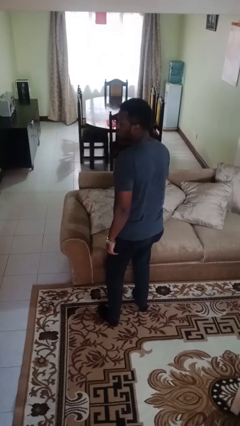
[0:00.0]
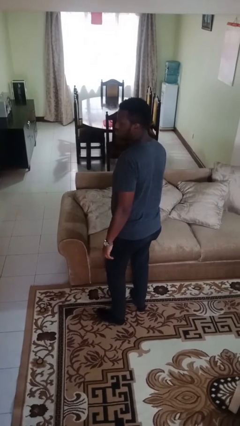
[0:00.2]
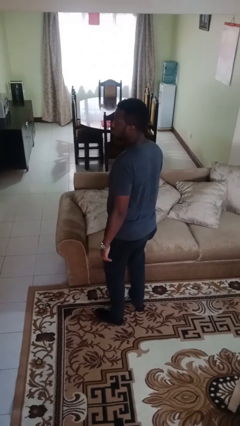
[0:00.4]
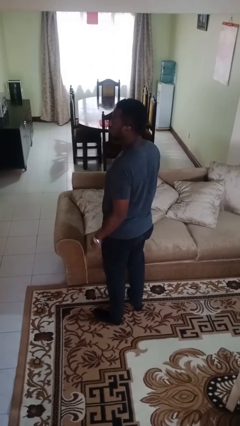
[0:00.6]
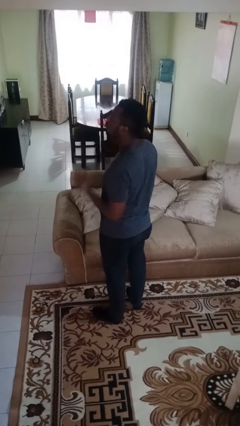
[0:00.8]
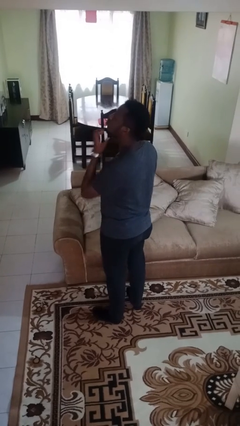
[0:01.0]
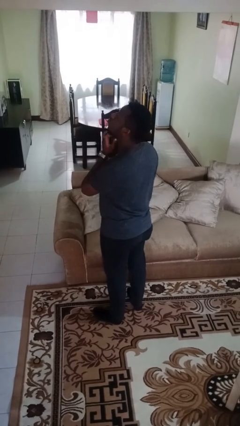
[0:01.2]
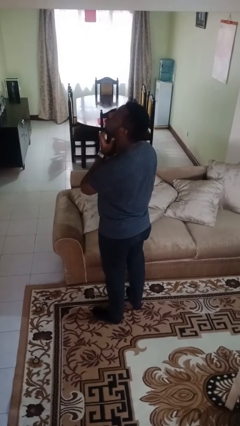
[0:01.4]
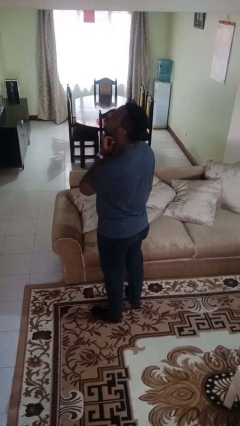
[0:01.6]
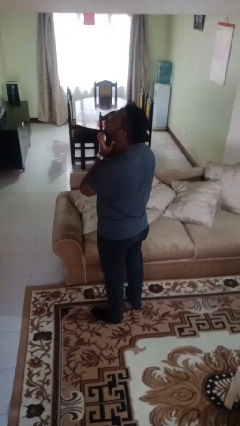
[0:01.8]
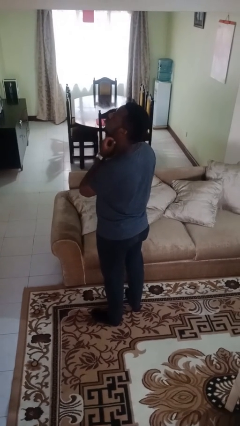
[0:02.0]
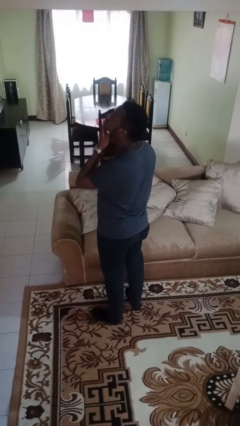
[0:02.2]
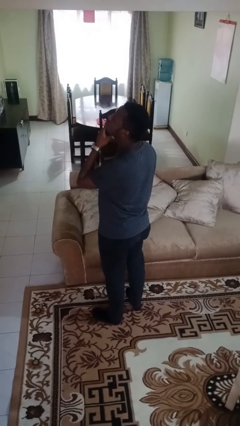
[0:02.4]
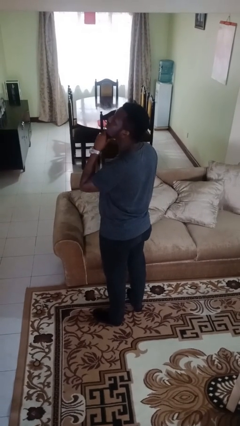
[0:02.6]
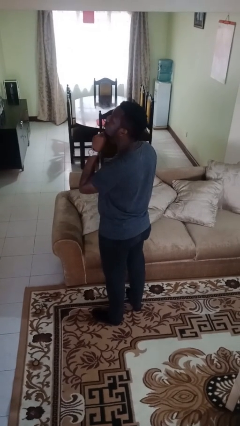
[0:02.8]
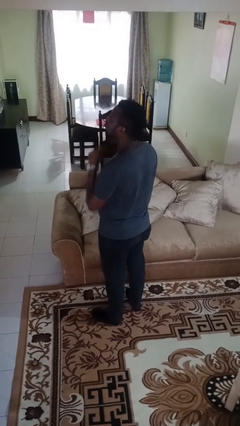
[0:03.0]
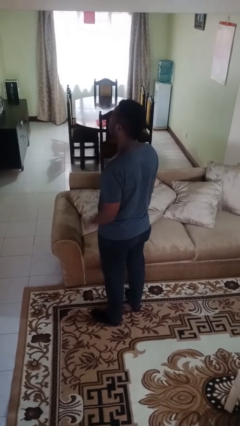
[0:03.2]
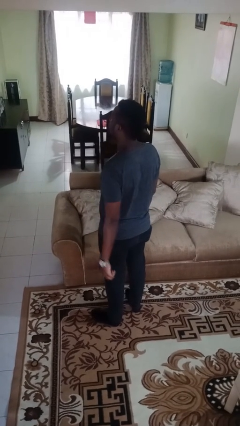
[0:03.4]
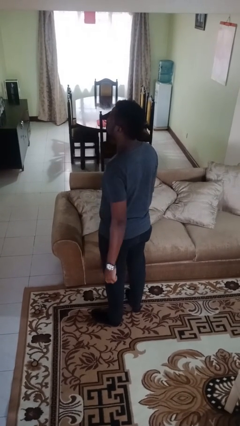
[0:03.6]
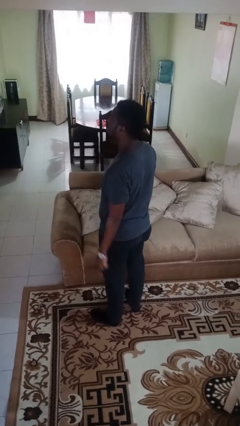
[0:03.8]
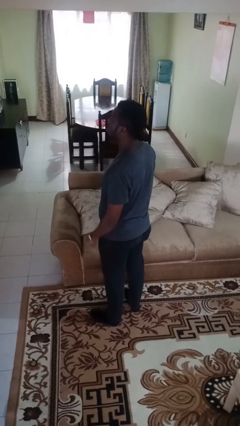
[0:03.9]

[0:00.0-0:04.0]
person strokes chin

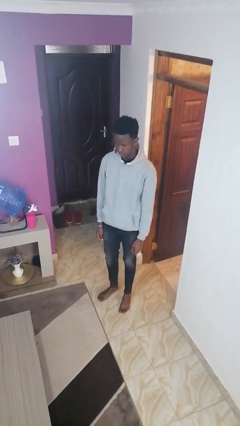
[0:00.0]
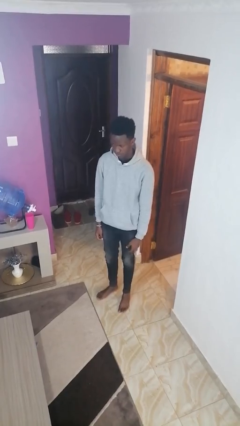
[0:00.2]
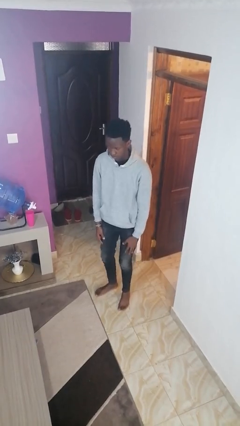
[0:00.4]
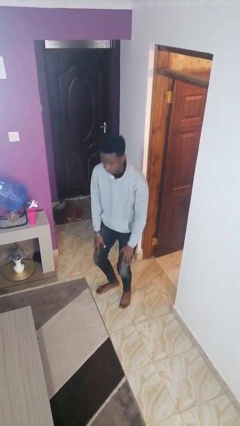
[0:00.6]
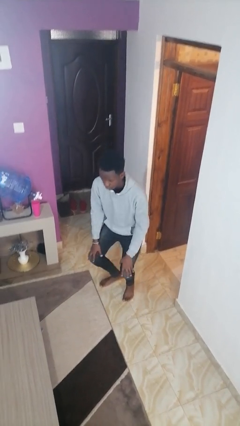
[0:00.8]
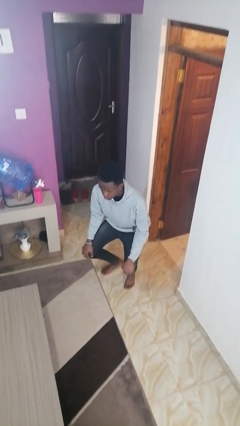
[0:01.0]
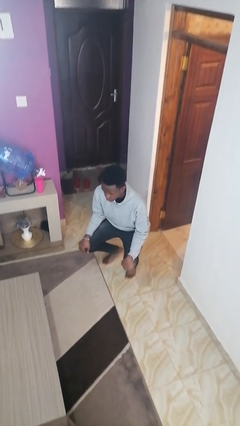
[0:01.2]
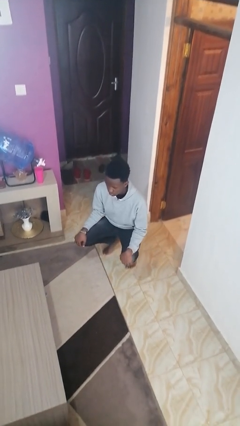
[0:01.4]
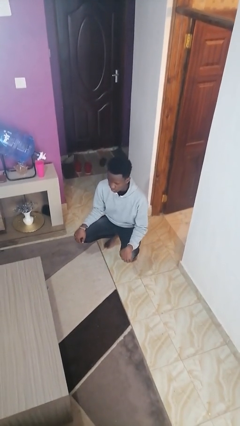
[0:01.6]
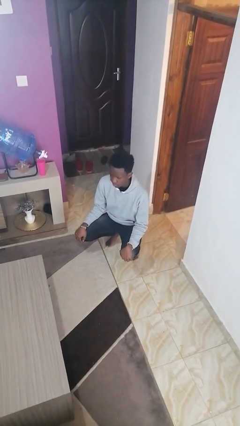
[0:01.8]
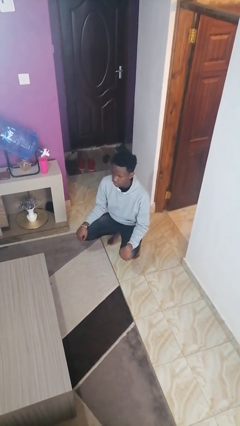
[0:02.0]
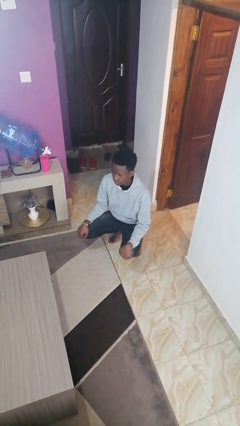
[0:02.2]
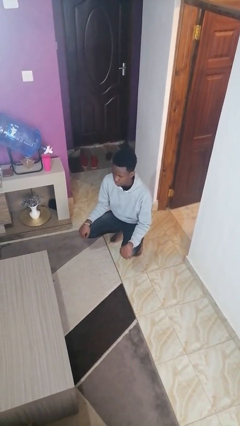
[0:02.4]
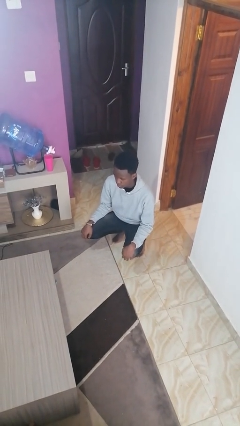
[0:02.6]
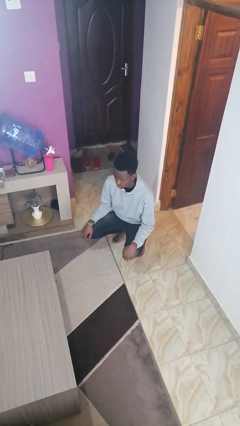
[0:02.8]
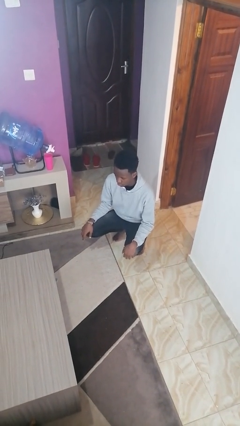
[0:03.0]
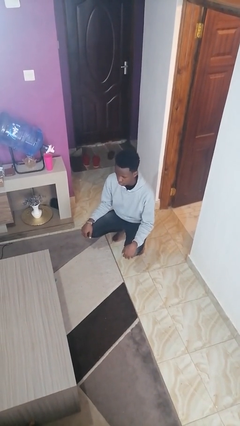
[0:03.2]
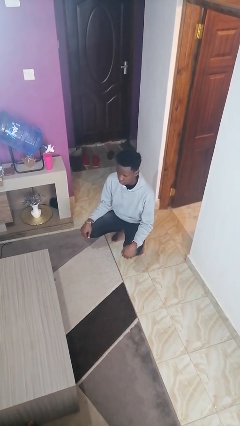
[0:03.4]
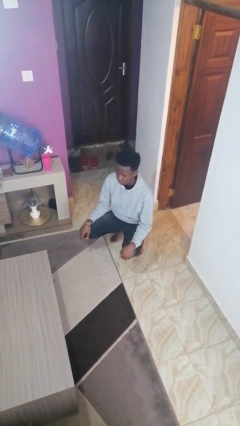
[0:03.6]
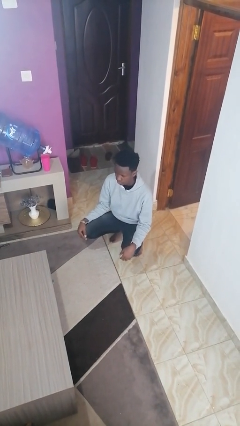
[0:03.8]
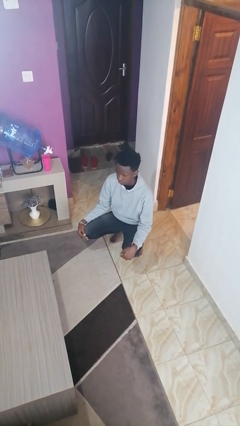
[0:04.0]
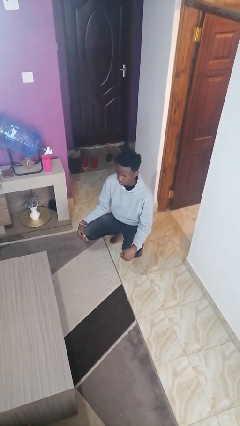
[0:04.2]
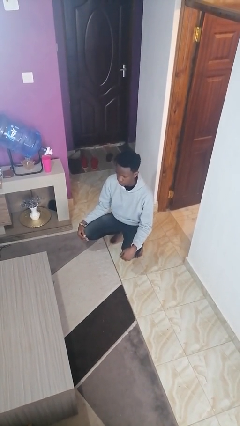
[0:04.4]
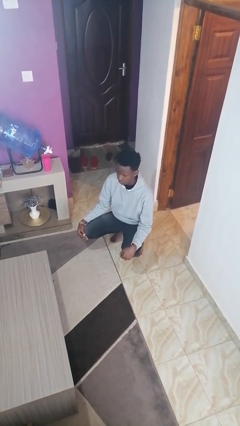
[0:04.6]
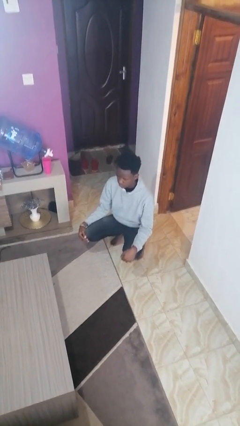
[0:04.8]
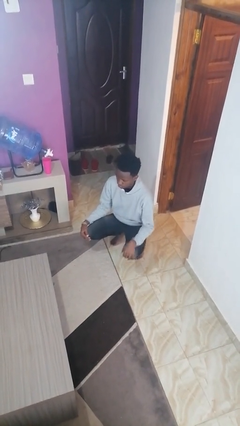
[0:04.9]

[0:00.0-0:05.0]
person squats

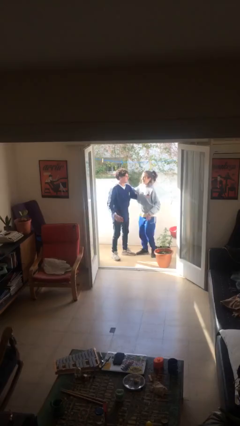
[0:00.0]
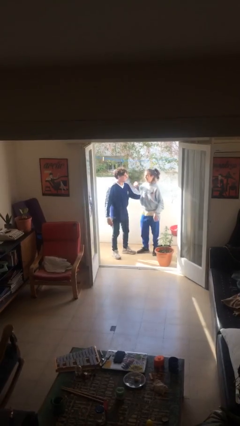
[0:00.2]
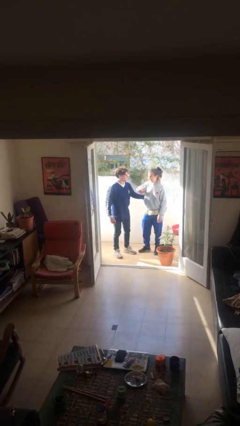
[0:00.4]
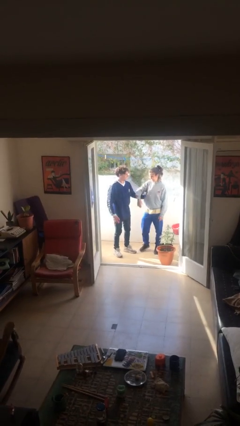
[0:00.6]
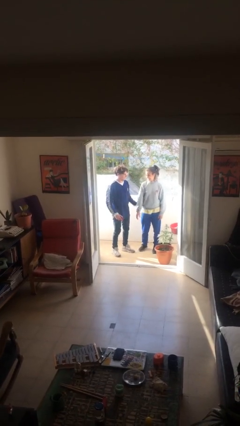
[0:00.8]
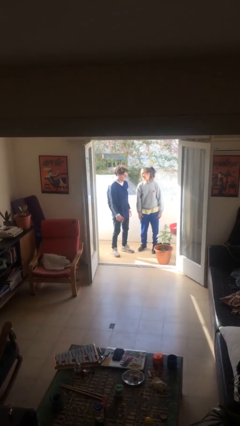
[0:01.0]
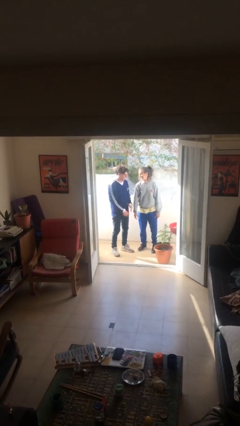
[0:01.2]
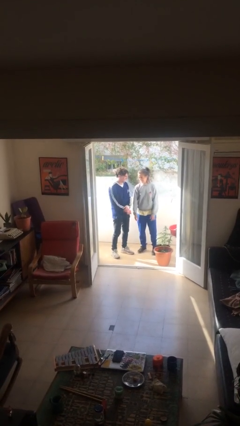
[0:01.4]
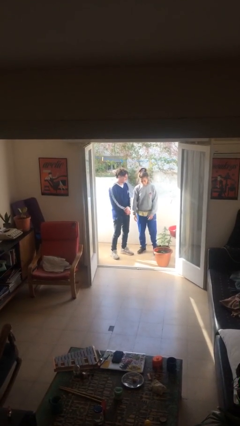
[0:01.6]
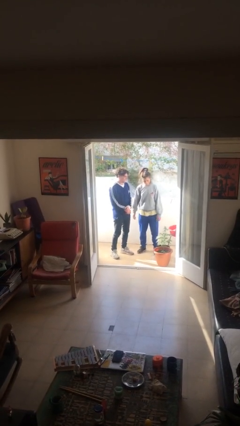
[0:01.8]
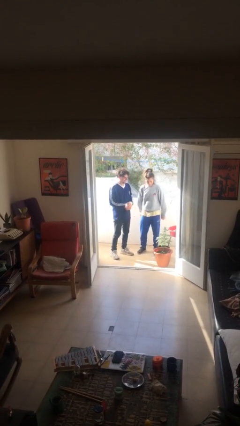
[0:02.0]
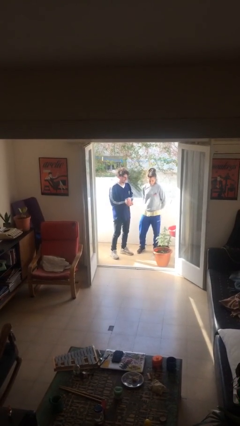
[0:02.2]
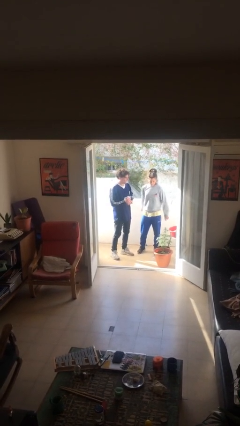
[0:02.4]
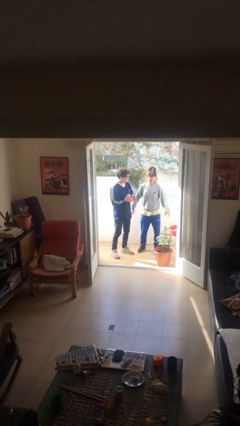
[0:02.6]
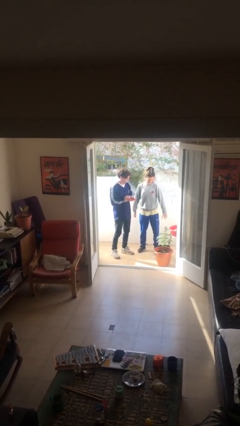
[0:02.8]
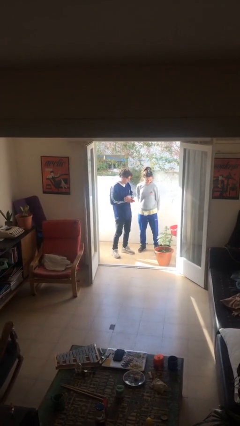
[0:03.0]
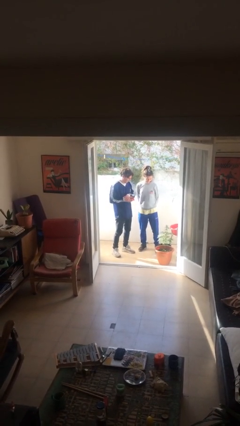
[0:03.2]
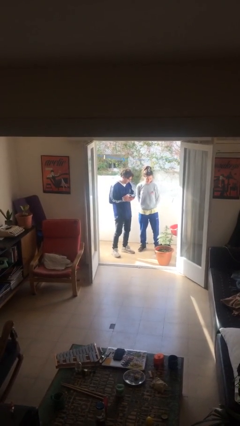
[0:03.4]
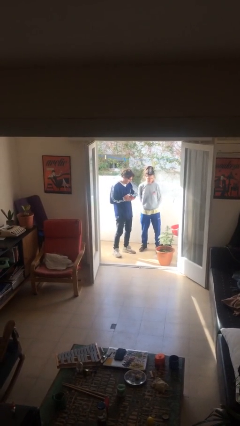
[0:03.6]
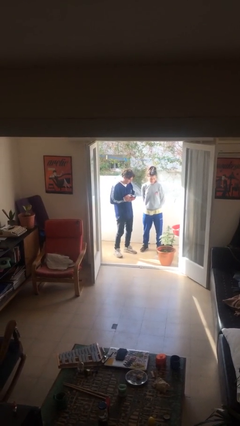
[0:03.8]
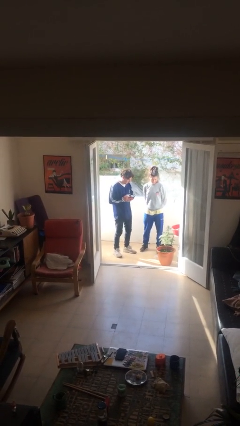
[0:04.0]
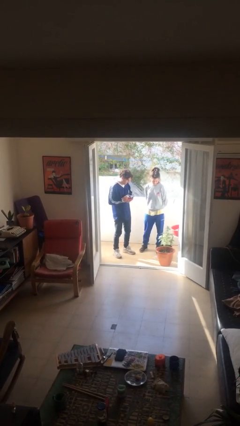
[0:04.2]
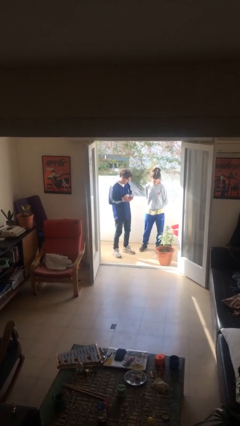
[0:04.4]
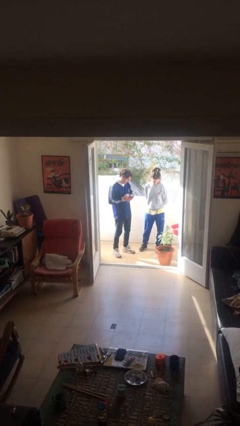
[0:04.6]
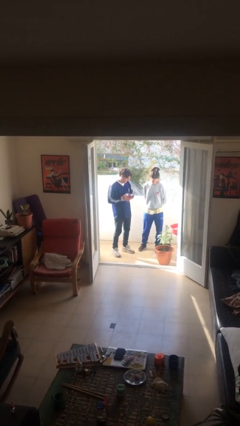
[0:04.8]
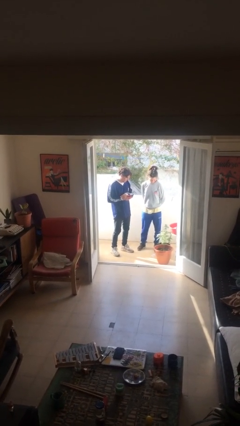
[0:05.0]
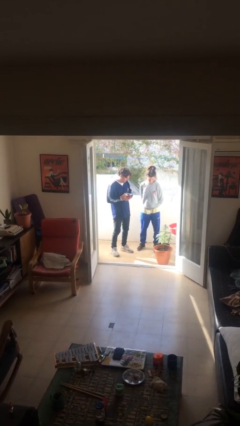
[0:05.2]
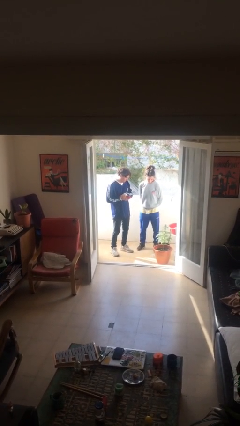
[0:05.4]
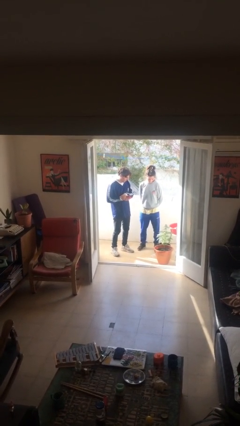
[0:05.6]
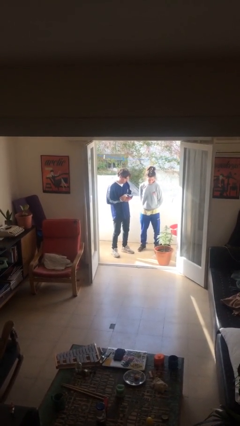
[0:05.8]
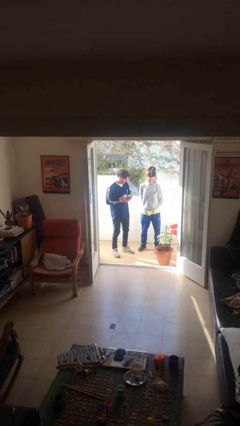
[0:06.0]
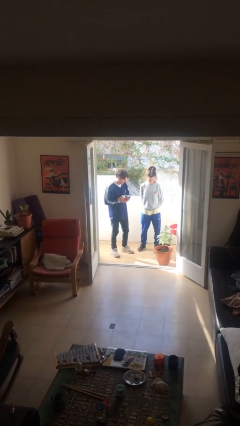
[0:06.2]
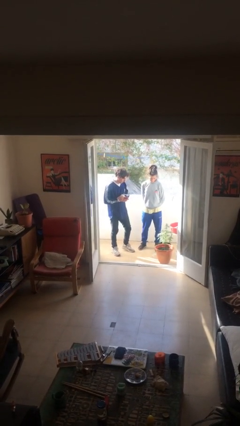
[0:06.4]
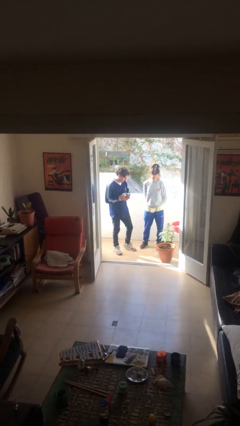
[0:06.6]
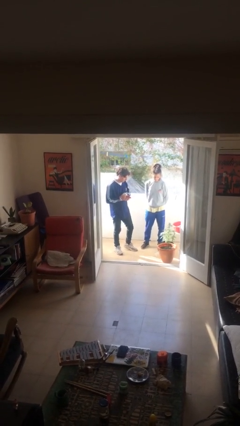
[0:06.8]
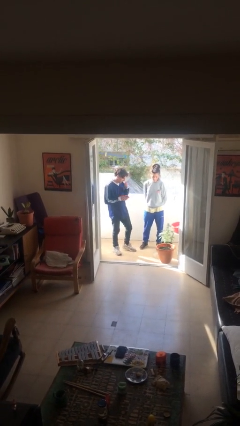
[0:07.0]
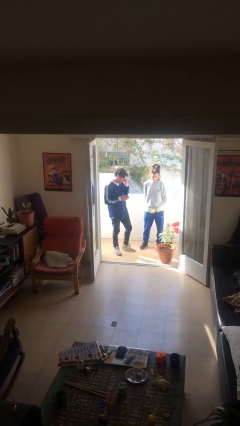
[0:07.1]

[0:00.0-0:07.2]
person talks to person

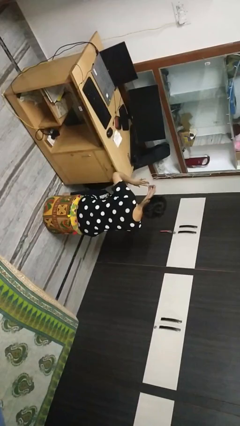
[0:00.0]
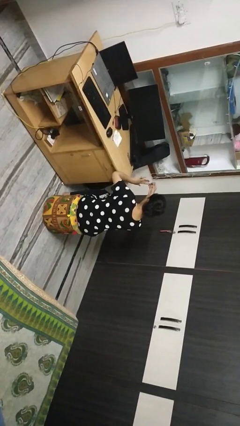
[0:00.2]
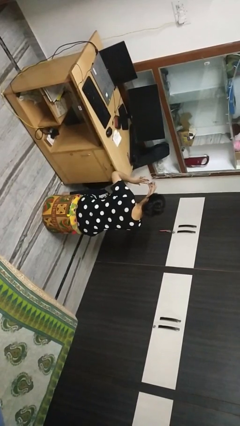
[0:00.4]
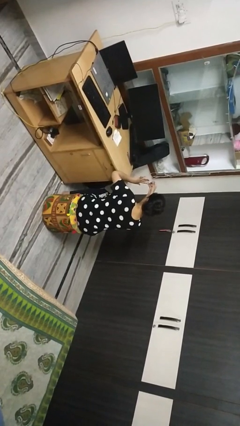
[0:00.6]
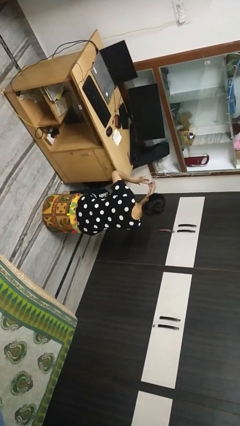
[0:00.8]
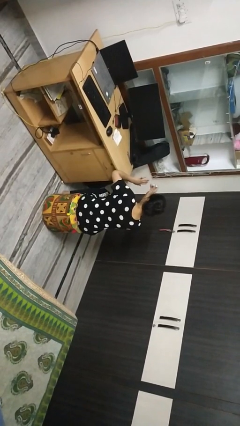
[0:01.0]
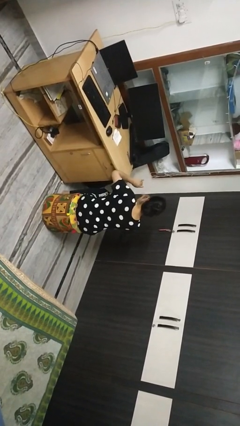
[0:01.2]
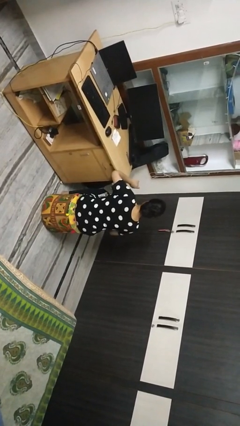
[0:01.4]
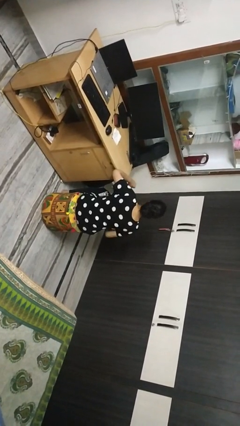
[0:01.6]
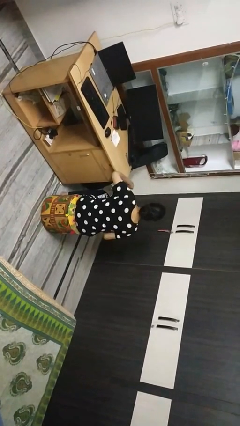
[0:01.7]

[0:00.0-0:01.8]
person clips fingernails
